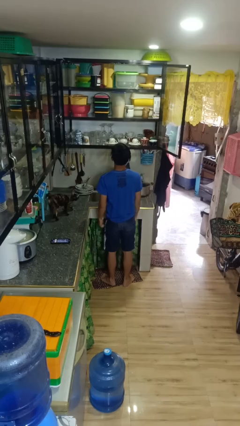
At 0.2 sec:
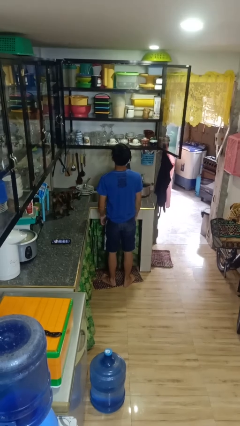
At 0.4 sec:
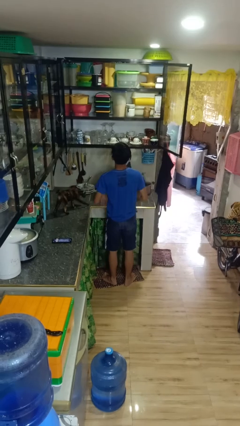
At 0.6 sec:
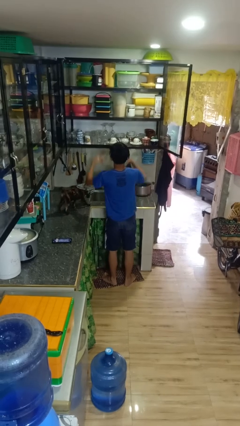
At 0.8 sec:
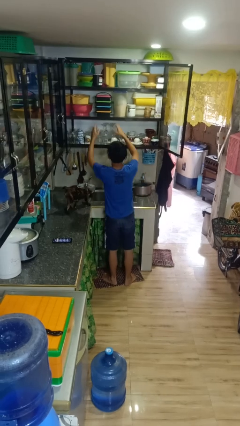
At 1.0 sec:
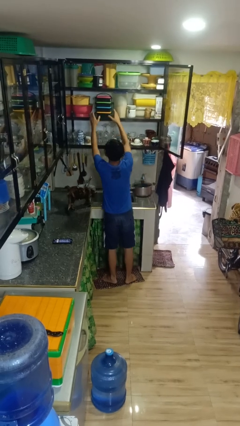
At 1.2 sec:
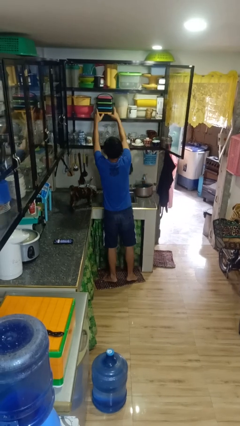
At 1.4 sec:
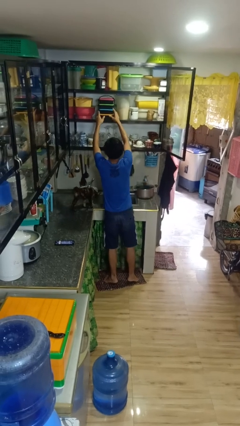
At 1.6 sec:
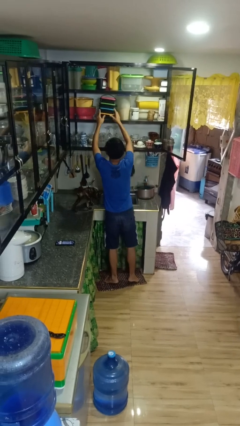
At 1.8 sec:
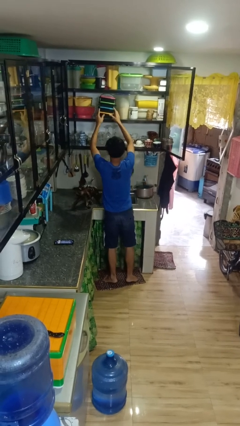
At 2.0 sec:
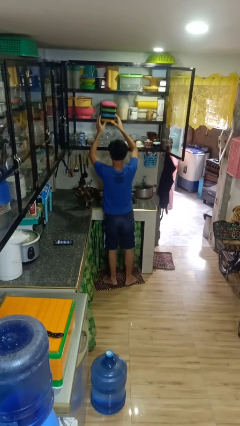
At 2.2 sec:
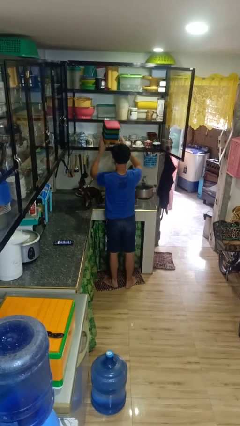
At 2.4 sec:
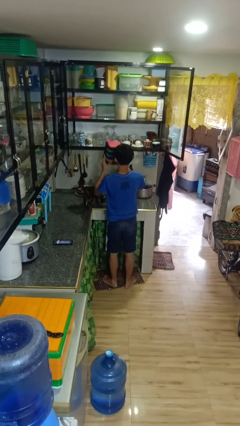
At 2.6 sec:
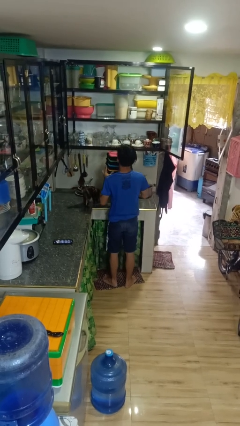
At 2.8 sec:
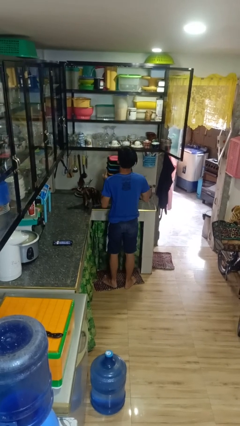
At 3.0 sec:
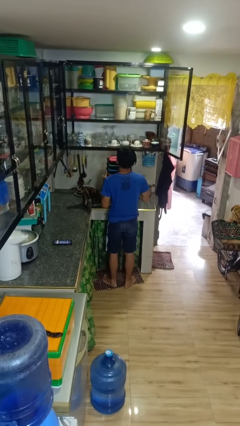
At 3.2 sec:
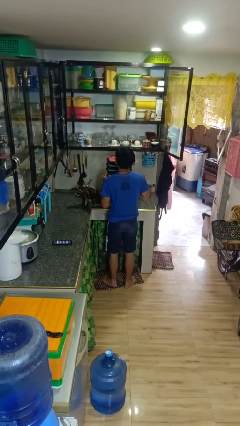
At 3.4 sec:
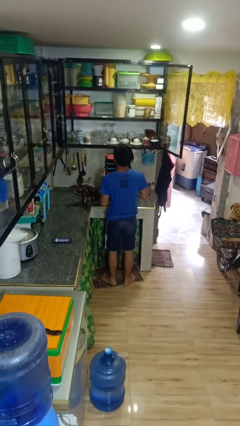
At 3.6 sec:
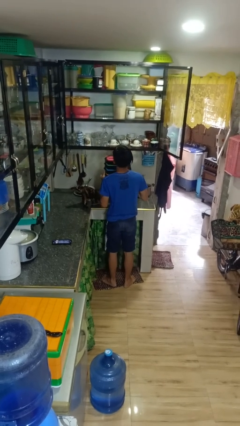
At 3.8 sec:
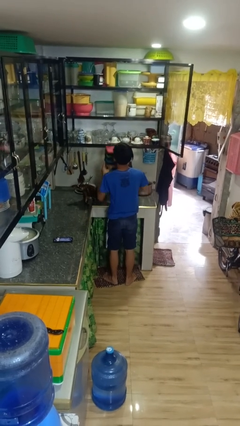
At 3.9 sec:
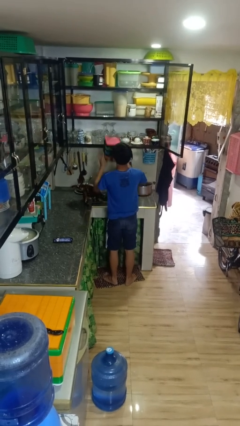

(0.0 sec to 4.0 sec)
person picks up object from cabinet

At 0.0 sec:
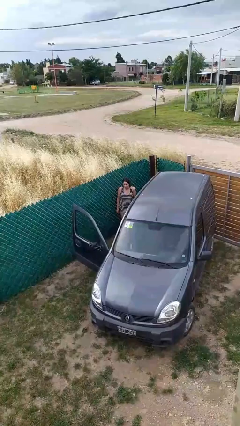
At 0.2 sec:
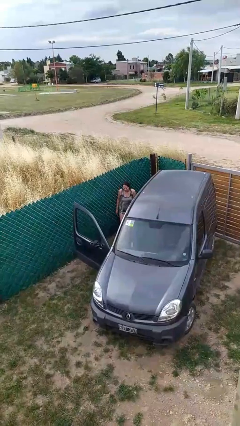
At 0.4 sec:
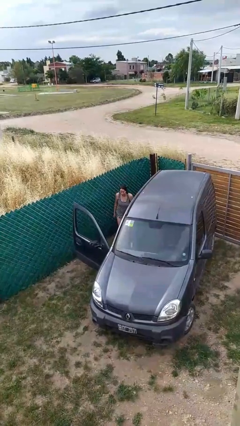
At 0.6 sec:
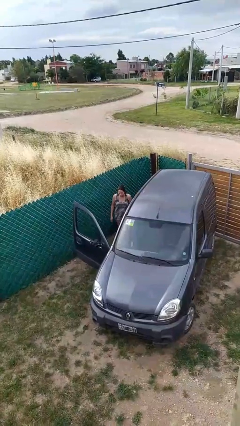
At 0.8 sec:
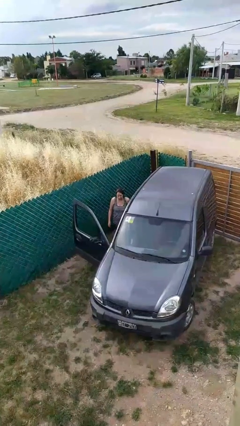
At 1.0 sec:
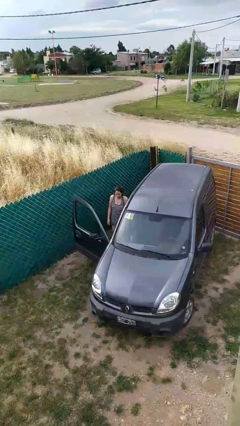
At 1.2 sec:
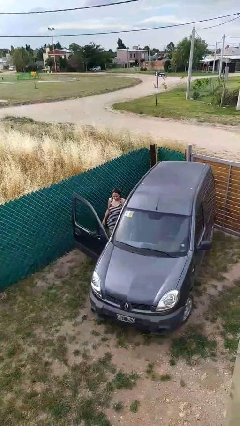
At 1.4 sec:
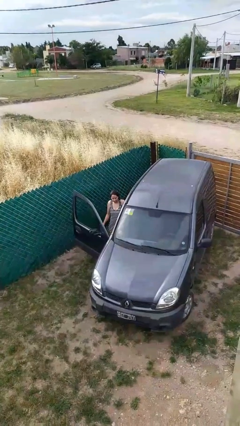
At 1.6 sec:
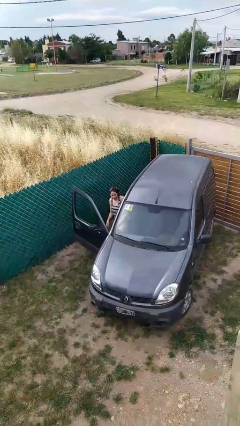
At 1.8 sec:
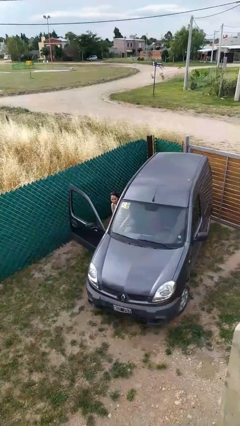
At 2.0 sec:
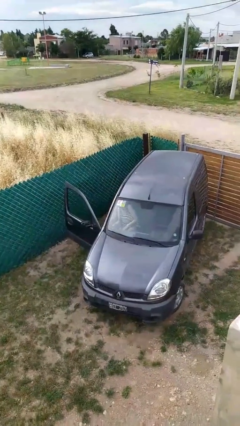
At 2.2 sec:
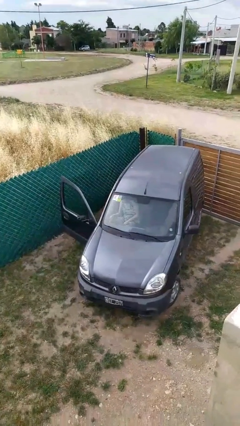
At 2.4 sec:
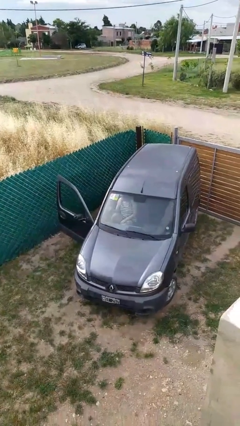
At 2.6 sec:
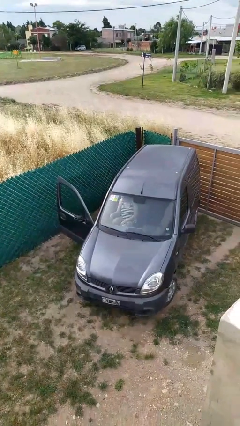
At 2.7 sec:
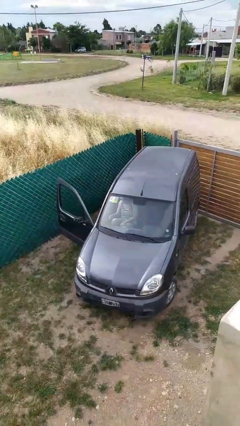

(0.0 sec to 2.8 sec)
person enters car

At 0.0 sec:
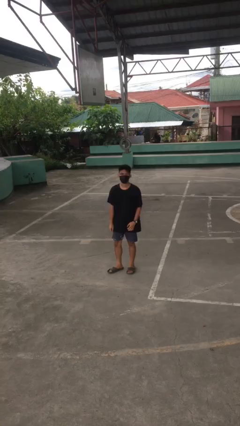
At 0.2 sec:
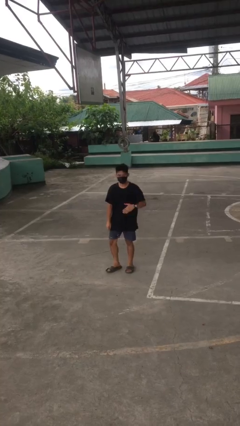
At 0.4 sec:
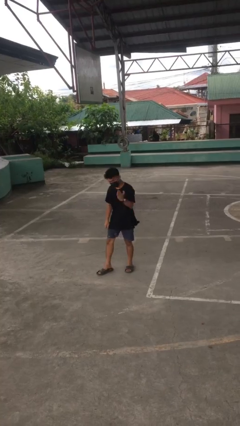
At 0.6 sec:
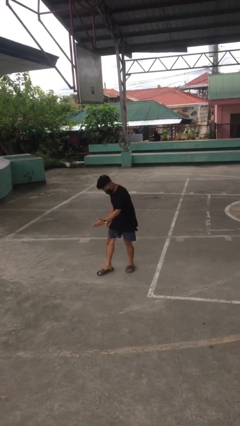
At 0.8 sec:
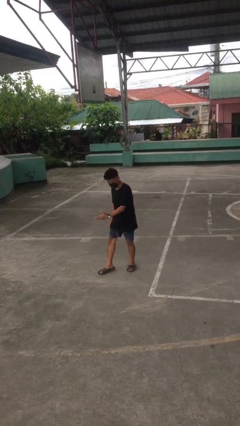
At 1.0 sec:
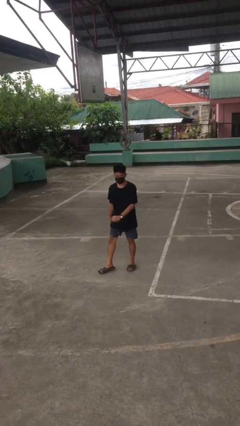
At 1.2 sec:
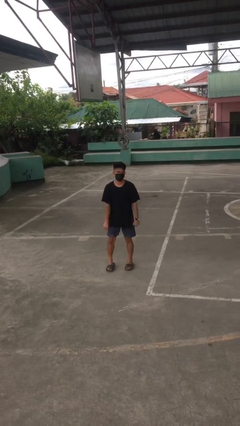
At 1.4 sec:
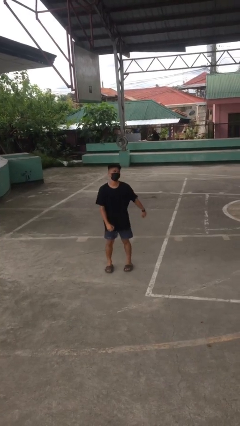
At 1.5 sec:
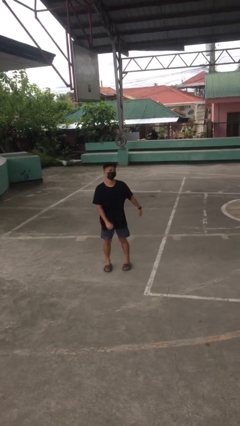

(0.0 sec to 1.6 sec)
person karate chop

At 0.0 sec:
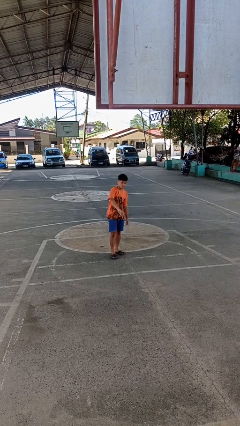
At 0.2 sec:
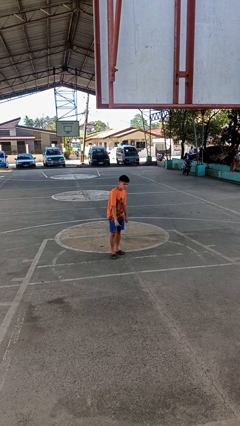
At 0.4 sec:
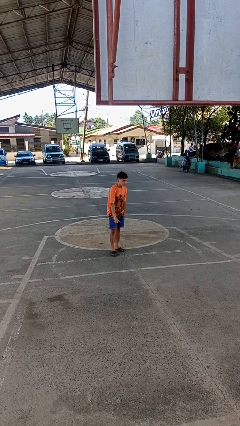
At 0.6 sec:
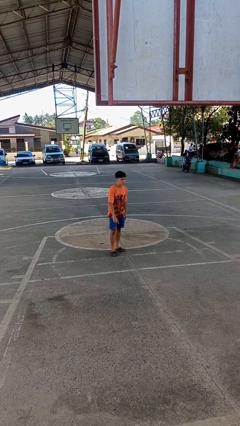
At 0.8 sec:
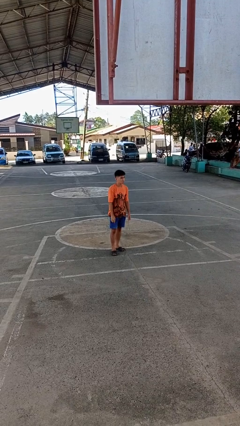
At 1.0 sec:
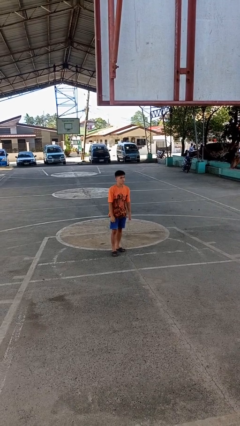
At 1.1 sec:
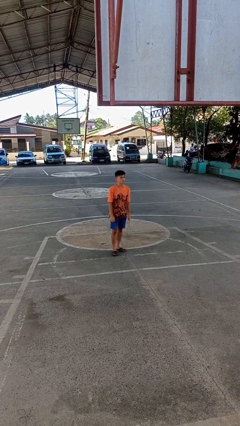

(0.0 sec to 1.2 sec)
person gestures swipe down

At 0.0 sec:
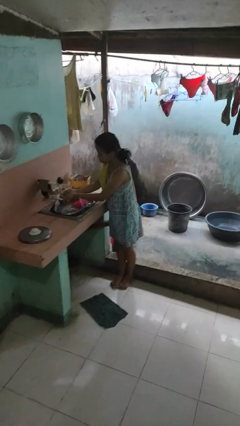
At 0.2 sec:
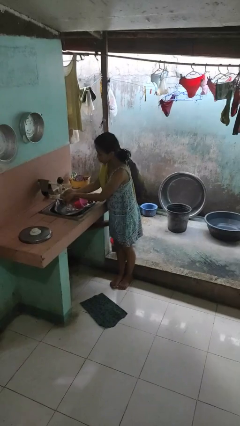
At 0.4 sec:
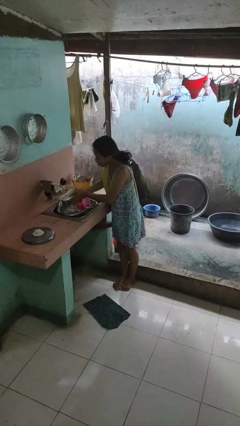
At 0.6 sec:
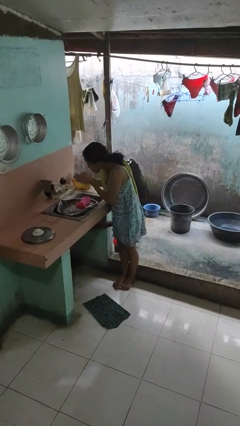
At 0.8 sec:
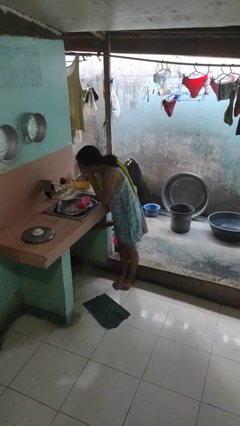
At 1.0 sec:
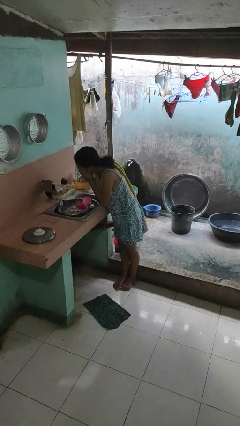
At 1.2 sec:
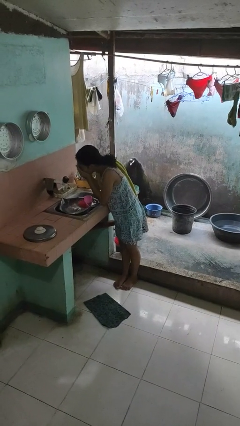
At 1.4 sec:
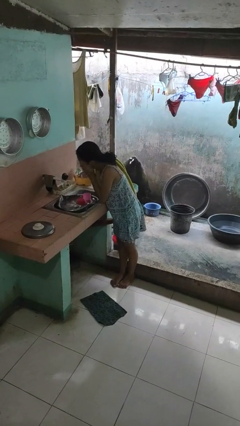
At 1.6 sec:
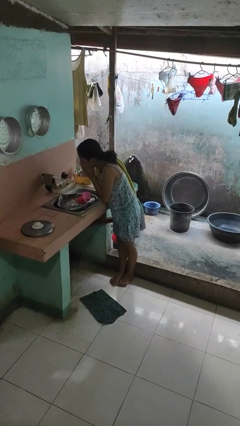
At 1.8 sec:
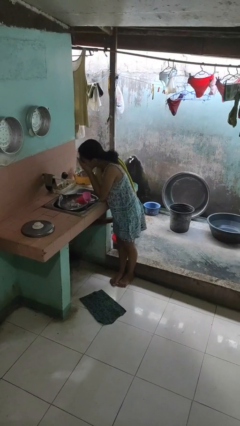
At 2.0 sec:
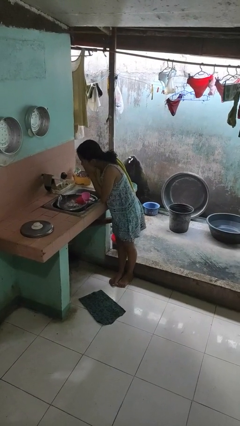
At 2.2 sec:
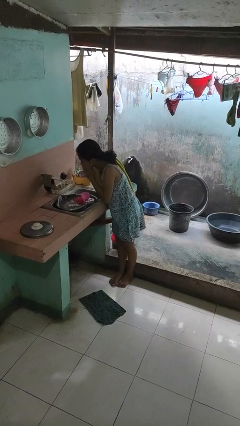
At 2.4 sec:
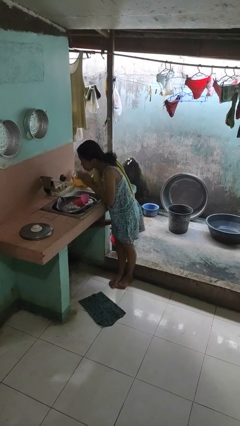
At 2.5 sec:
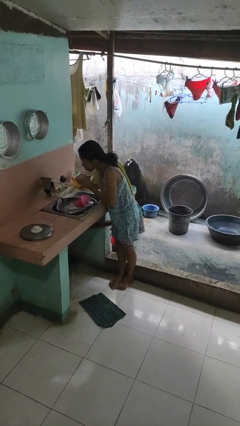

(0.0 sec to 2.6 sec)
person washes face

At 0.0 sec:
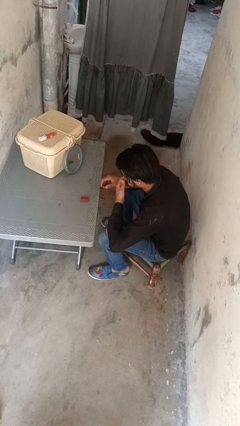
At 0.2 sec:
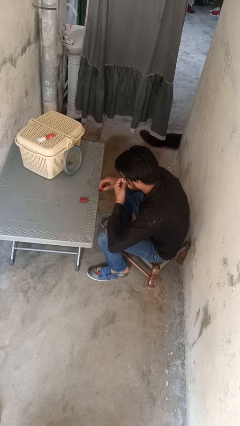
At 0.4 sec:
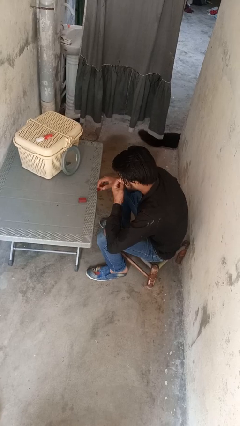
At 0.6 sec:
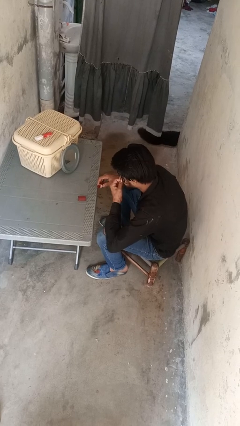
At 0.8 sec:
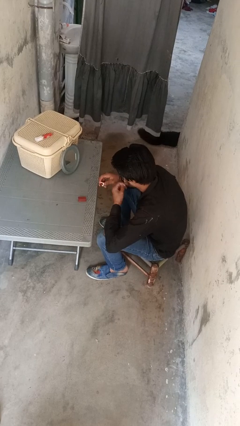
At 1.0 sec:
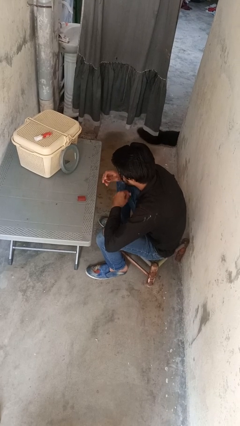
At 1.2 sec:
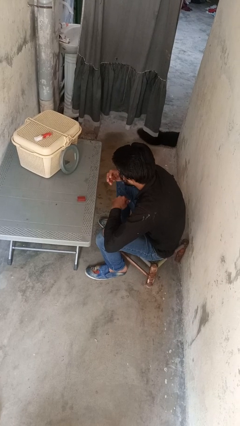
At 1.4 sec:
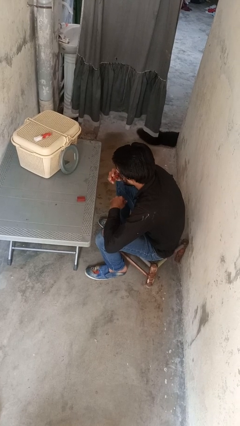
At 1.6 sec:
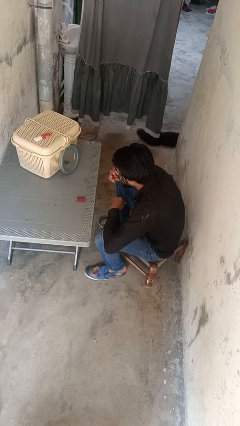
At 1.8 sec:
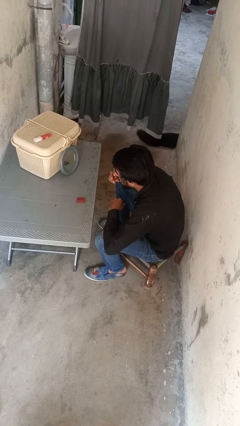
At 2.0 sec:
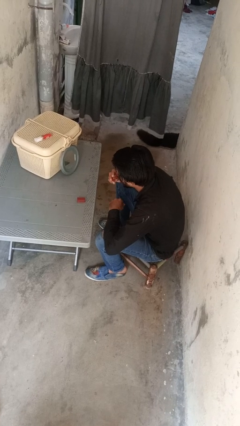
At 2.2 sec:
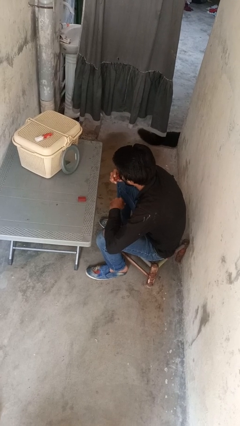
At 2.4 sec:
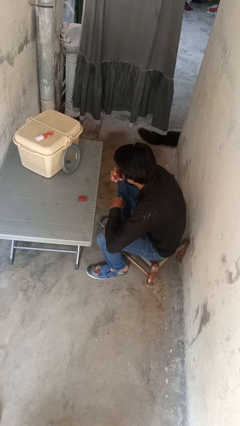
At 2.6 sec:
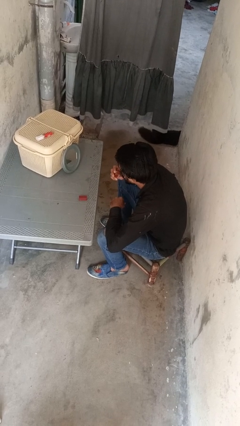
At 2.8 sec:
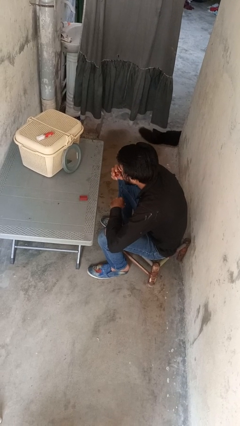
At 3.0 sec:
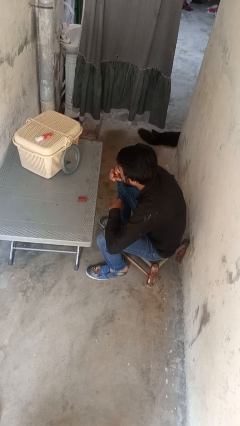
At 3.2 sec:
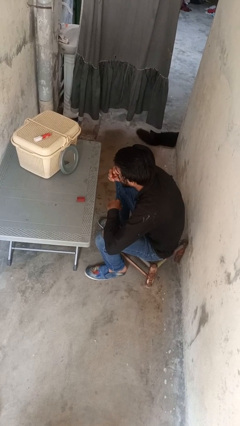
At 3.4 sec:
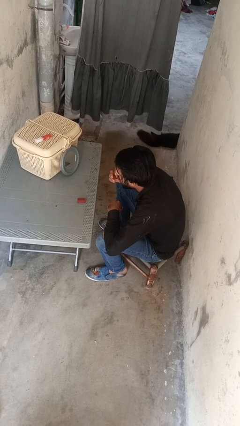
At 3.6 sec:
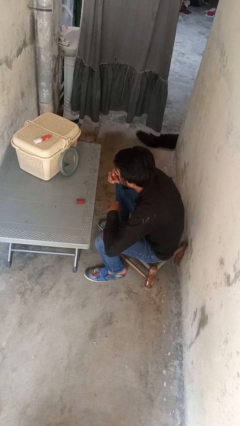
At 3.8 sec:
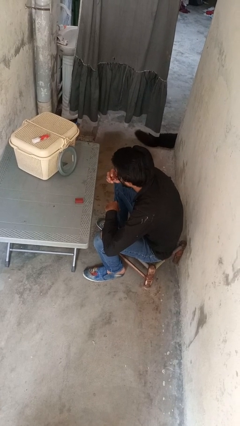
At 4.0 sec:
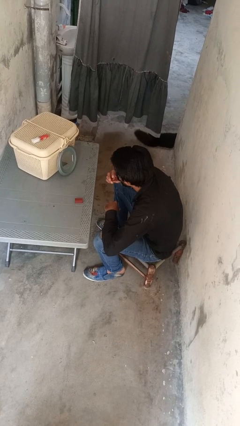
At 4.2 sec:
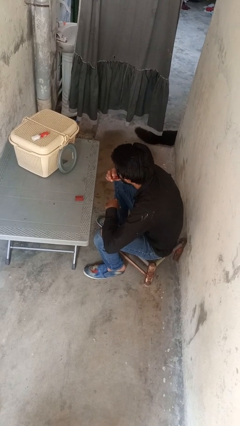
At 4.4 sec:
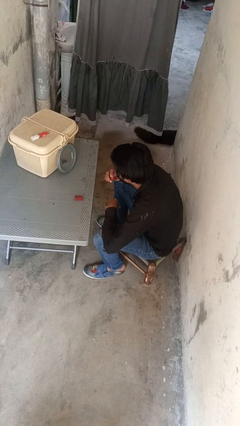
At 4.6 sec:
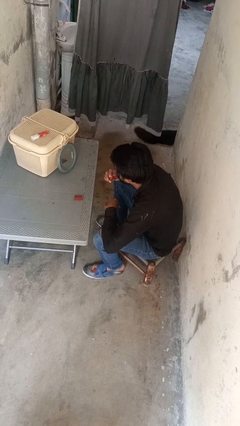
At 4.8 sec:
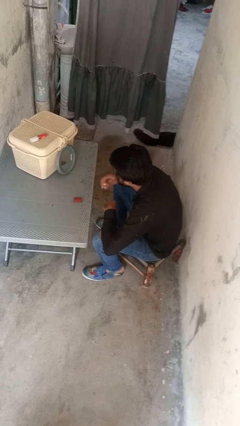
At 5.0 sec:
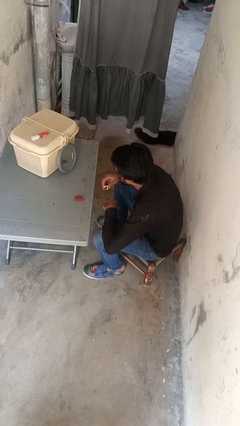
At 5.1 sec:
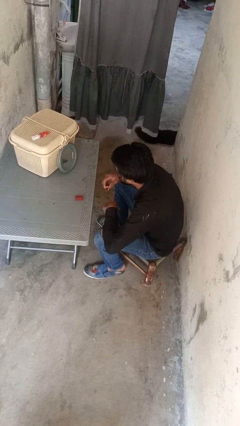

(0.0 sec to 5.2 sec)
person applies lip makeup
